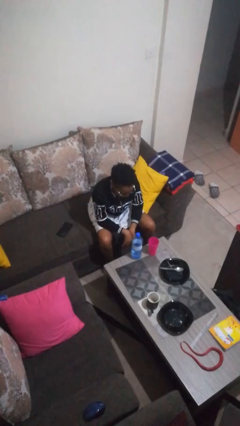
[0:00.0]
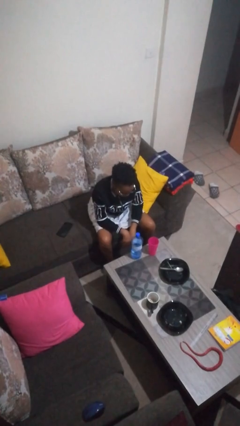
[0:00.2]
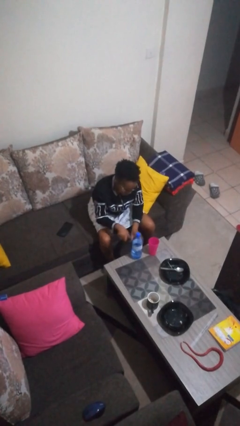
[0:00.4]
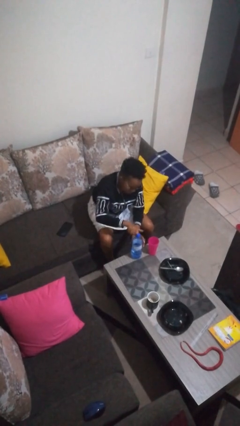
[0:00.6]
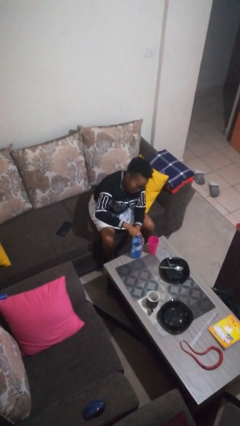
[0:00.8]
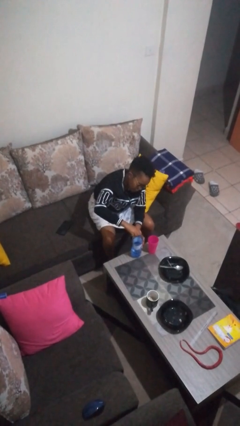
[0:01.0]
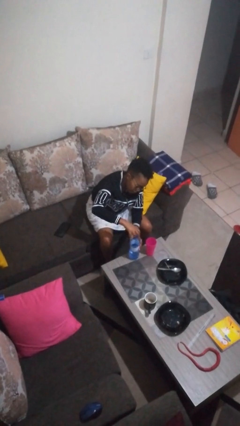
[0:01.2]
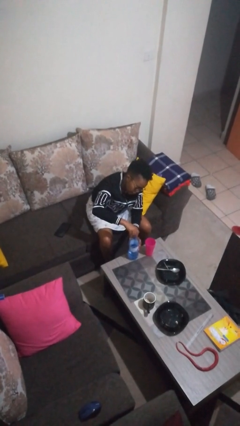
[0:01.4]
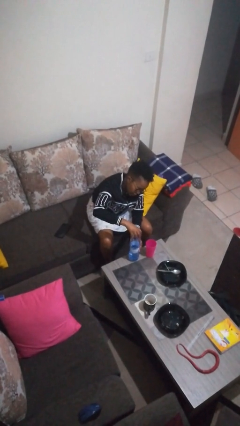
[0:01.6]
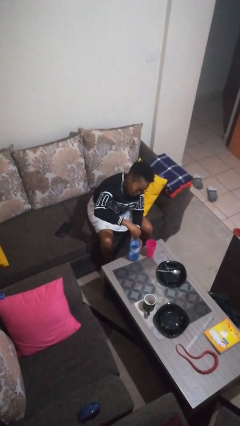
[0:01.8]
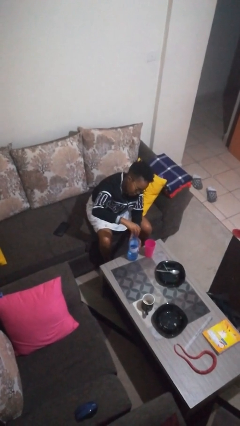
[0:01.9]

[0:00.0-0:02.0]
person unscrews lid from bottle

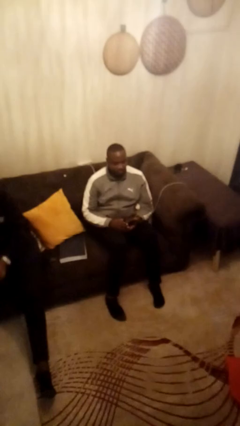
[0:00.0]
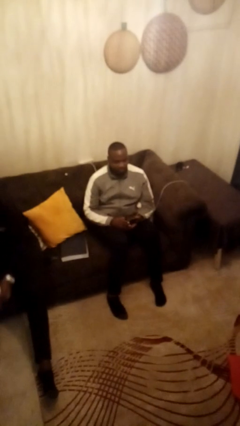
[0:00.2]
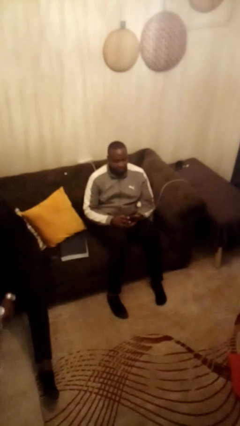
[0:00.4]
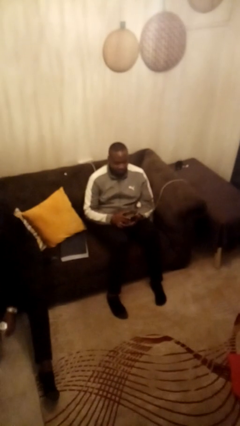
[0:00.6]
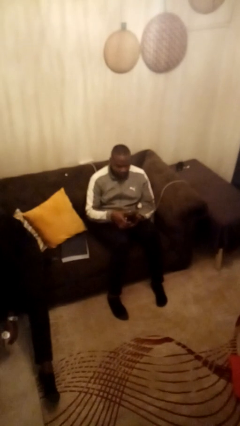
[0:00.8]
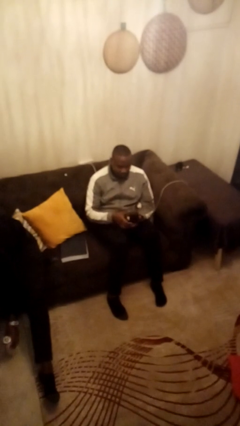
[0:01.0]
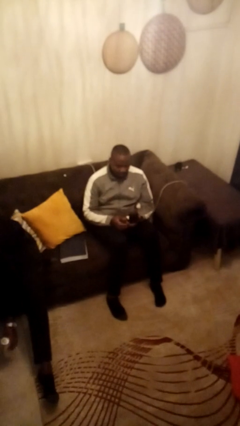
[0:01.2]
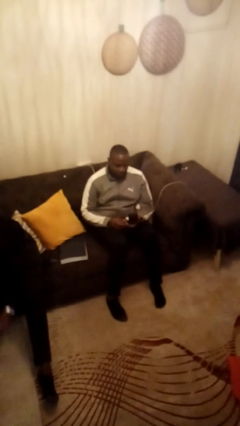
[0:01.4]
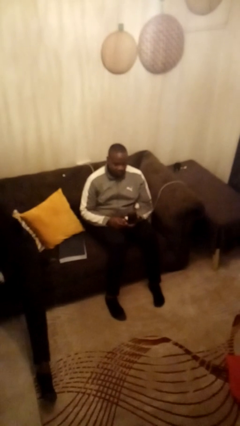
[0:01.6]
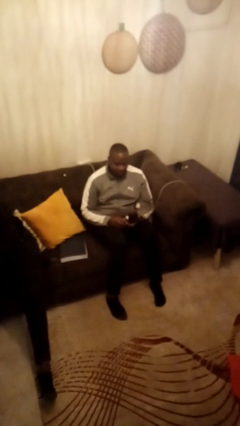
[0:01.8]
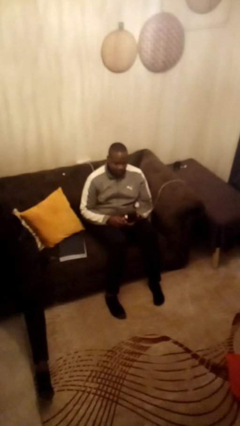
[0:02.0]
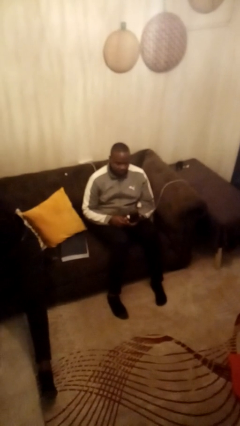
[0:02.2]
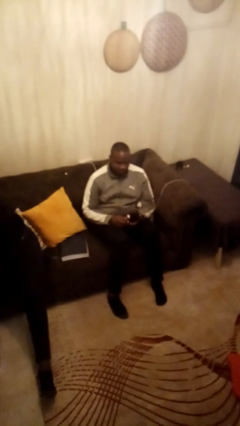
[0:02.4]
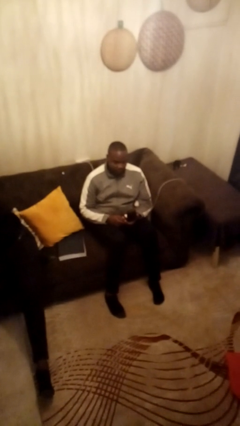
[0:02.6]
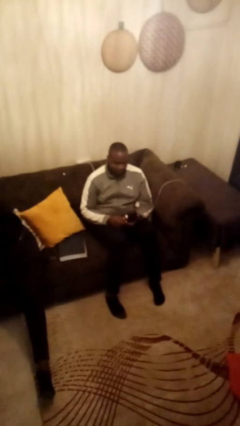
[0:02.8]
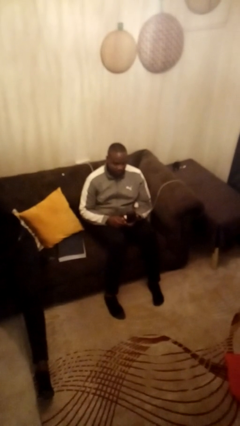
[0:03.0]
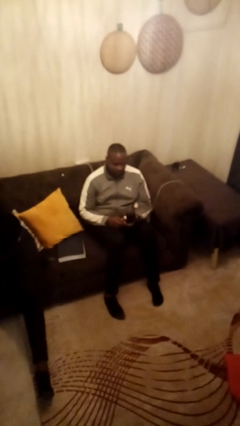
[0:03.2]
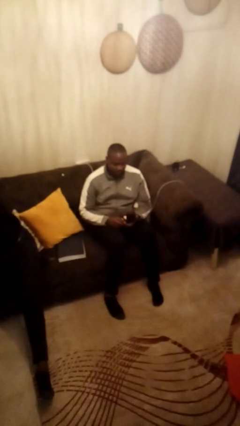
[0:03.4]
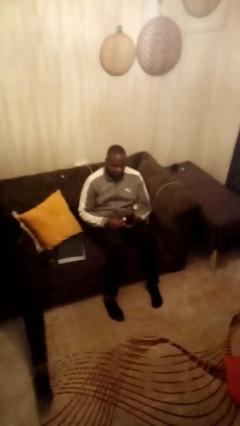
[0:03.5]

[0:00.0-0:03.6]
person opens jewelry box

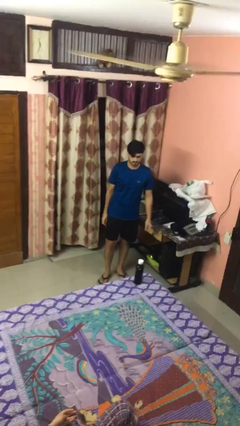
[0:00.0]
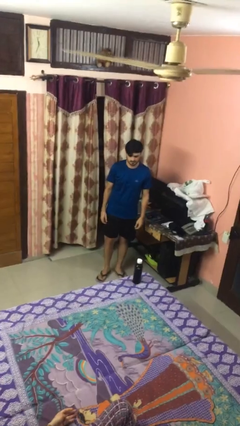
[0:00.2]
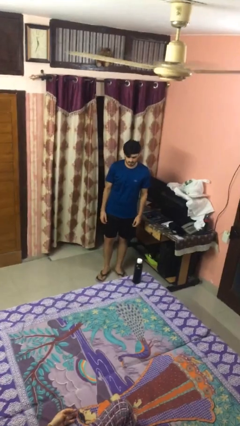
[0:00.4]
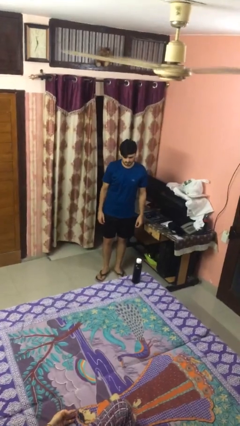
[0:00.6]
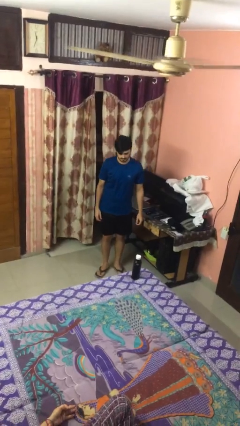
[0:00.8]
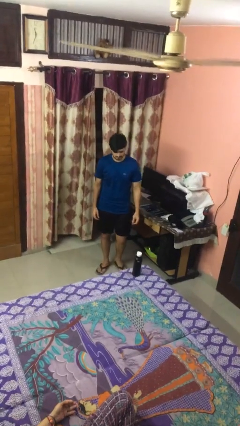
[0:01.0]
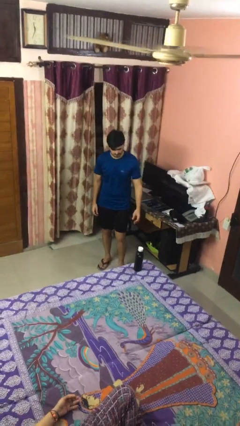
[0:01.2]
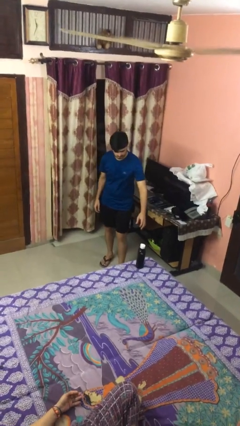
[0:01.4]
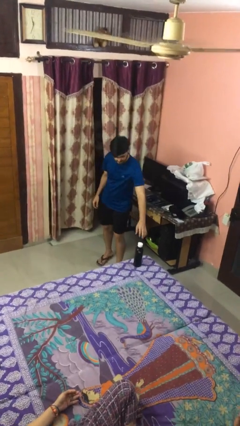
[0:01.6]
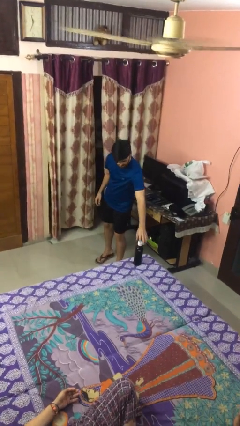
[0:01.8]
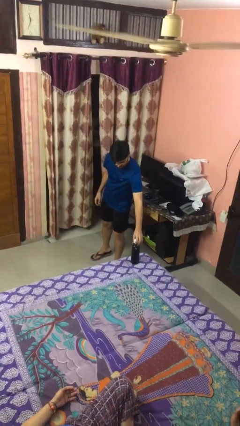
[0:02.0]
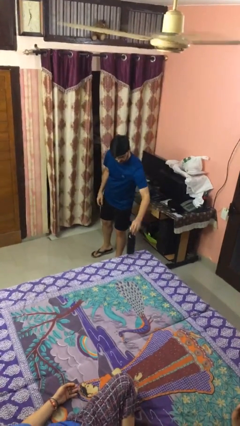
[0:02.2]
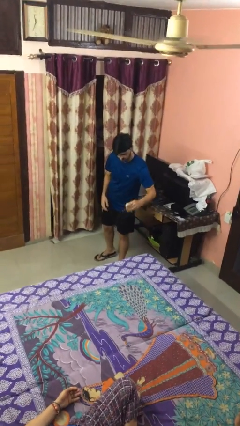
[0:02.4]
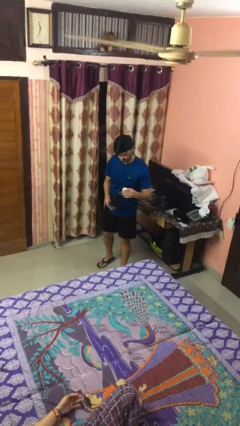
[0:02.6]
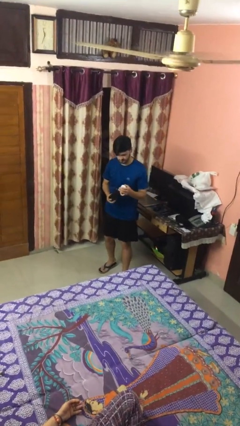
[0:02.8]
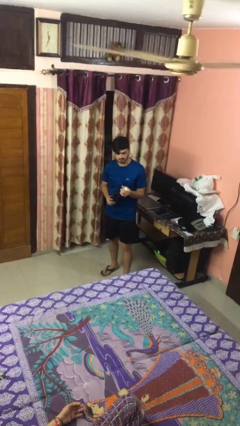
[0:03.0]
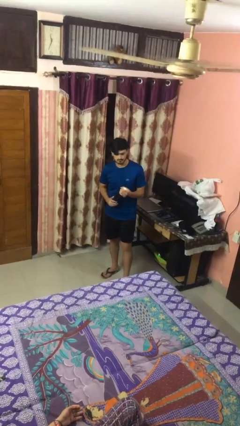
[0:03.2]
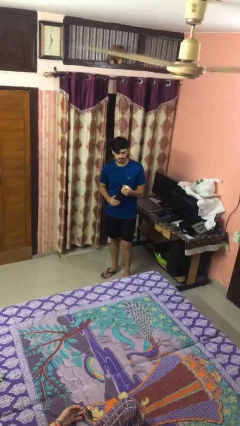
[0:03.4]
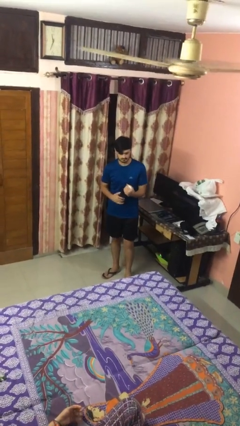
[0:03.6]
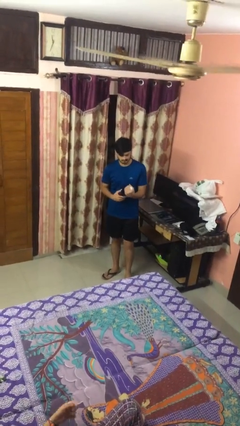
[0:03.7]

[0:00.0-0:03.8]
person picks up object from bed

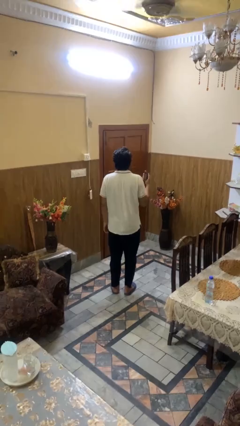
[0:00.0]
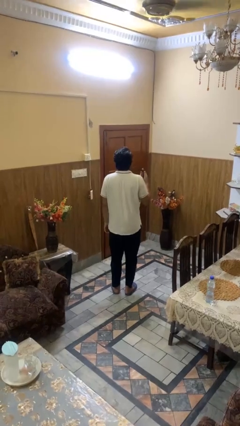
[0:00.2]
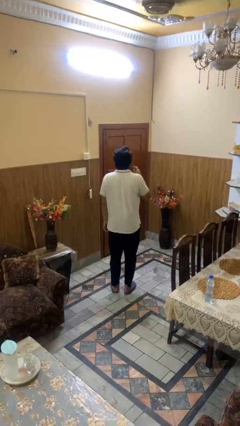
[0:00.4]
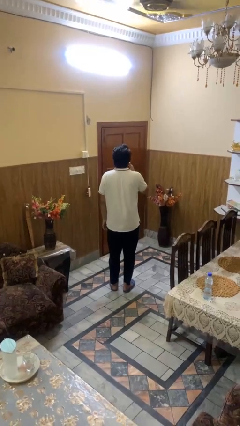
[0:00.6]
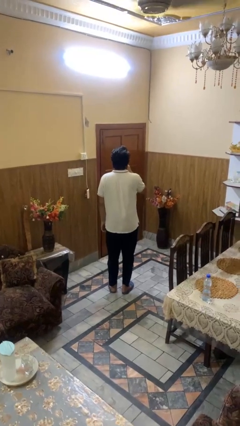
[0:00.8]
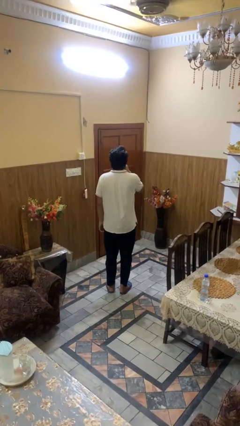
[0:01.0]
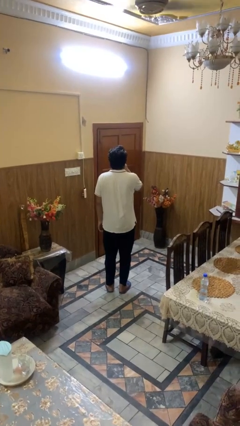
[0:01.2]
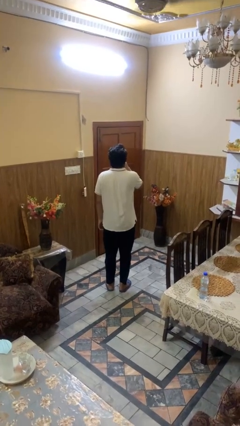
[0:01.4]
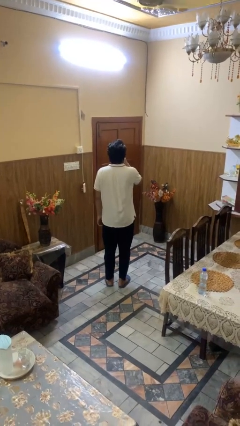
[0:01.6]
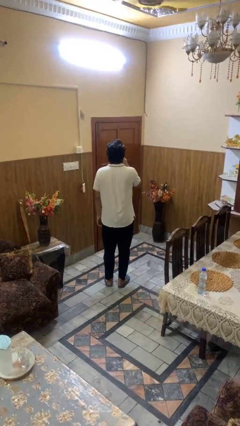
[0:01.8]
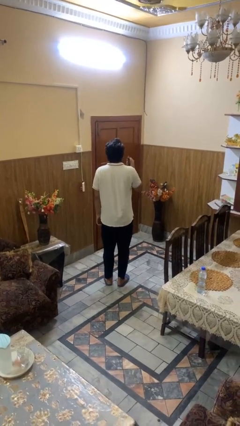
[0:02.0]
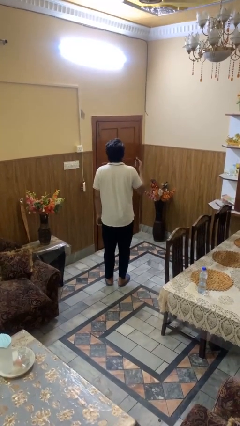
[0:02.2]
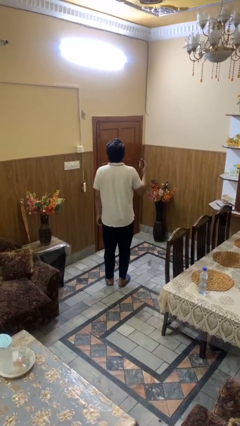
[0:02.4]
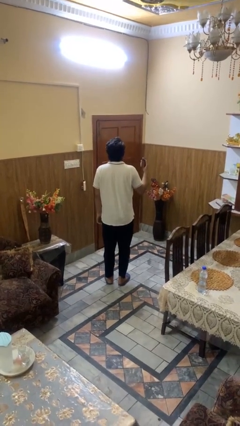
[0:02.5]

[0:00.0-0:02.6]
person vapes

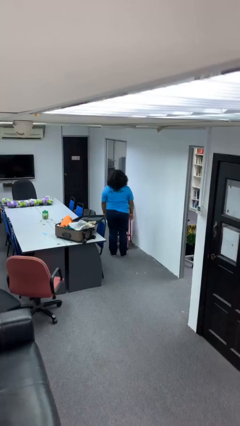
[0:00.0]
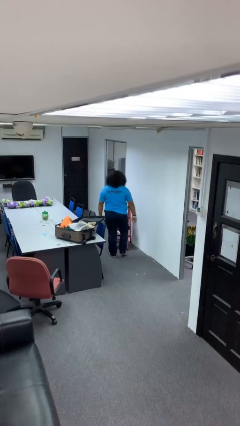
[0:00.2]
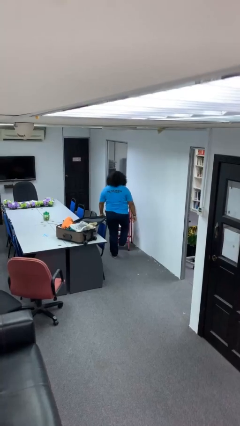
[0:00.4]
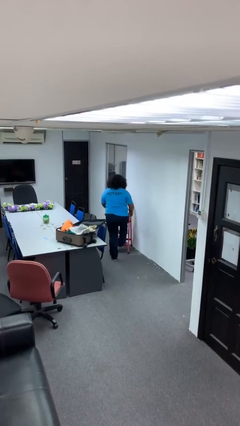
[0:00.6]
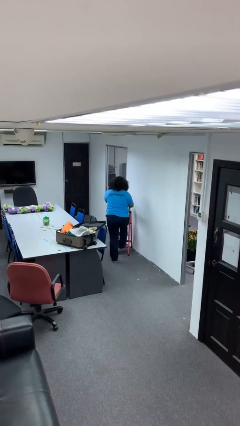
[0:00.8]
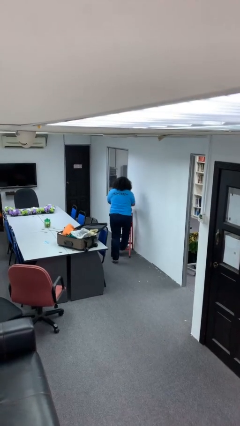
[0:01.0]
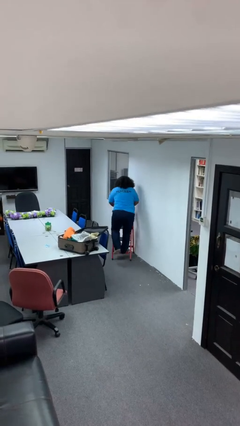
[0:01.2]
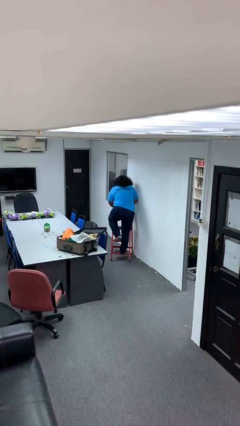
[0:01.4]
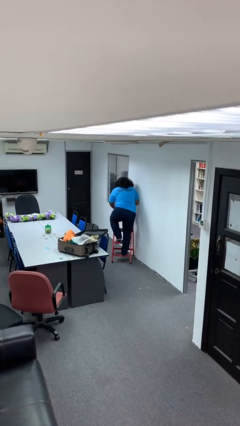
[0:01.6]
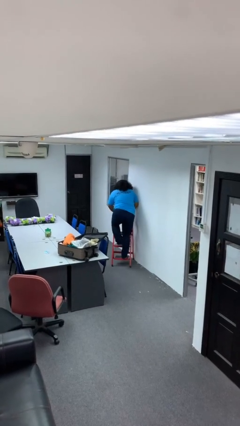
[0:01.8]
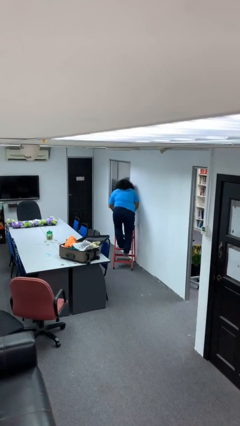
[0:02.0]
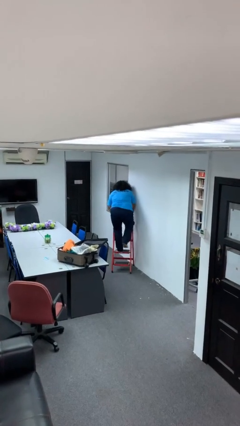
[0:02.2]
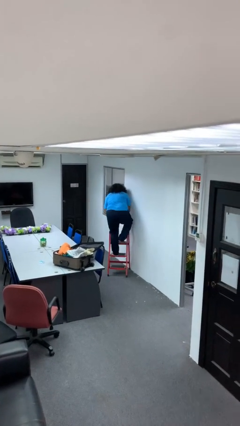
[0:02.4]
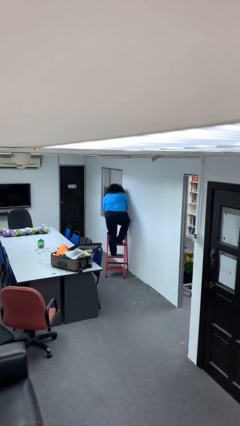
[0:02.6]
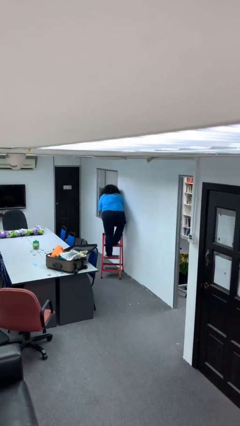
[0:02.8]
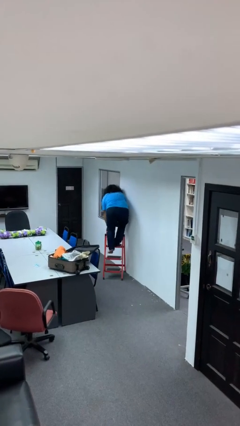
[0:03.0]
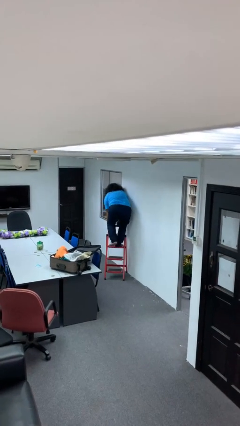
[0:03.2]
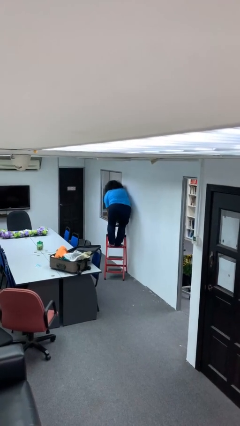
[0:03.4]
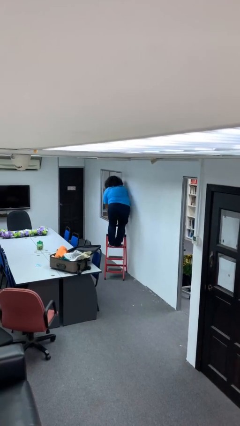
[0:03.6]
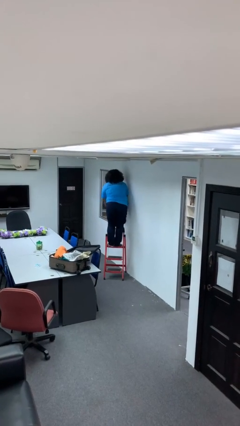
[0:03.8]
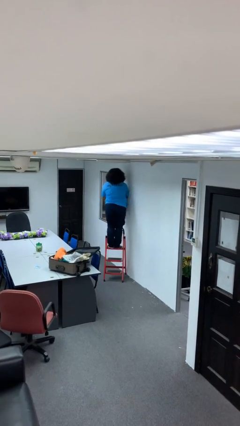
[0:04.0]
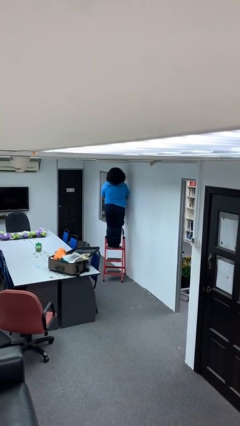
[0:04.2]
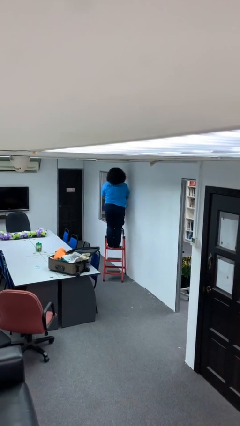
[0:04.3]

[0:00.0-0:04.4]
person climbs up ladder

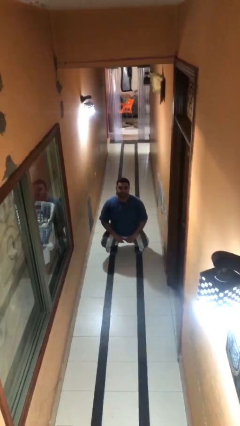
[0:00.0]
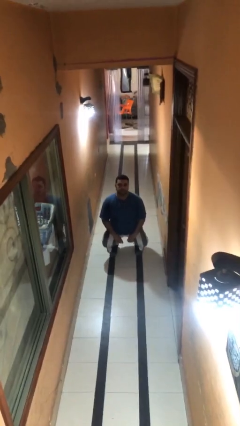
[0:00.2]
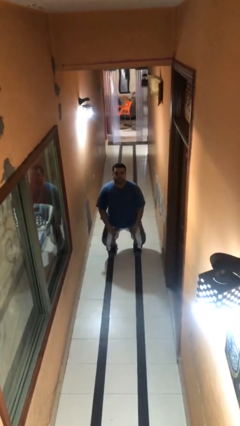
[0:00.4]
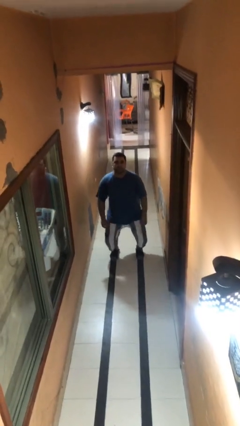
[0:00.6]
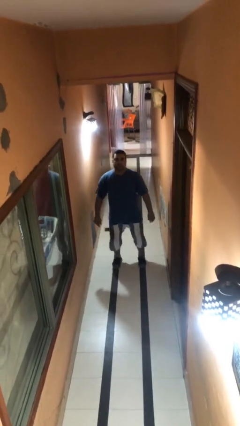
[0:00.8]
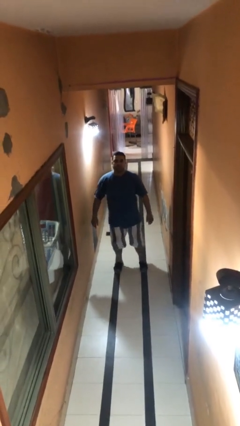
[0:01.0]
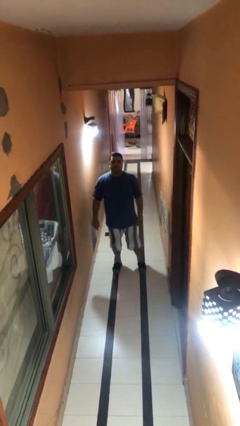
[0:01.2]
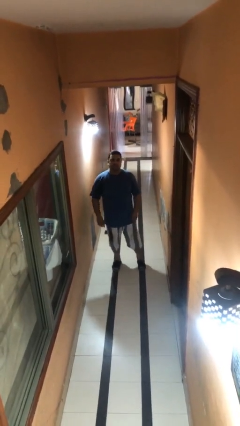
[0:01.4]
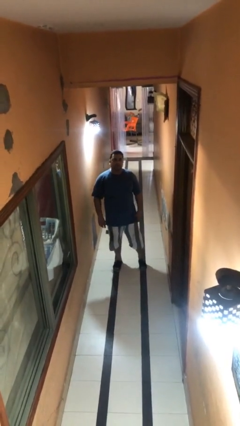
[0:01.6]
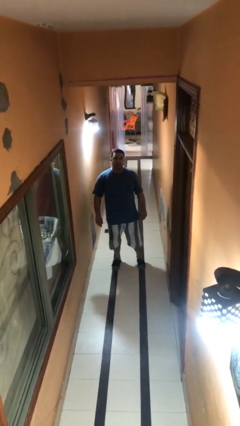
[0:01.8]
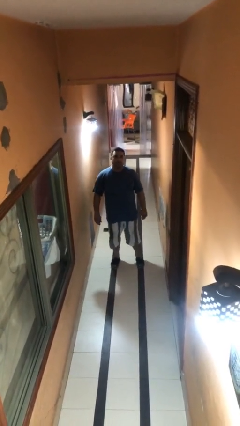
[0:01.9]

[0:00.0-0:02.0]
person stands up
